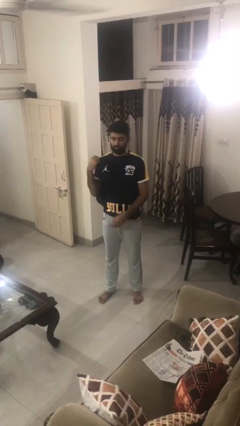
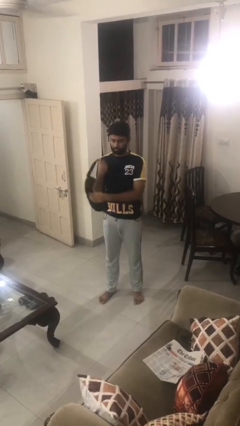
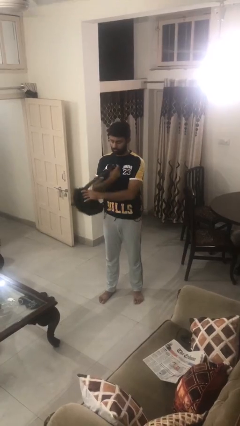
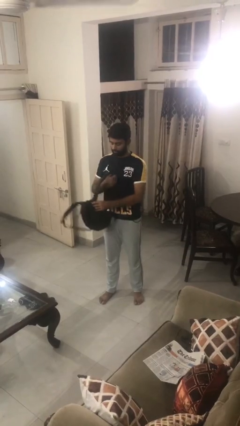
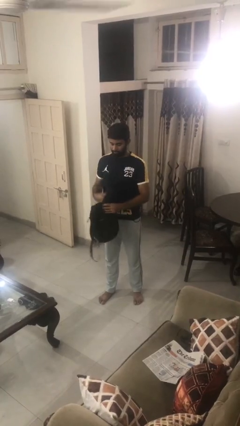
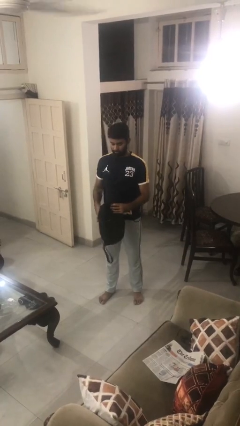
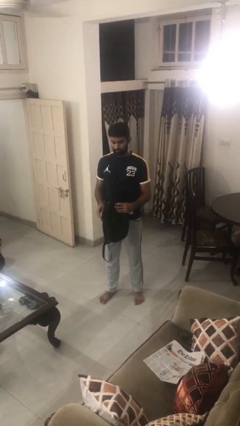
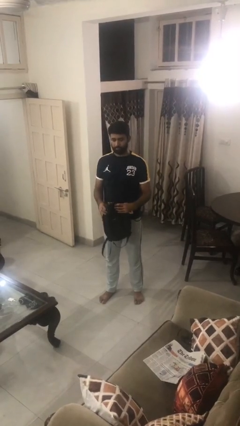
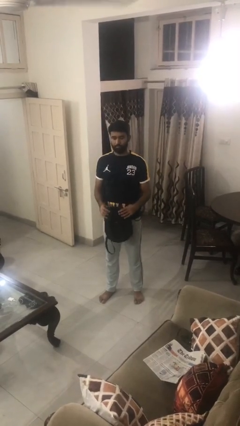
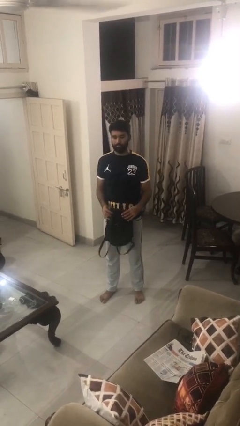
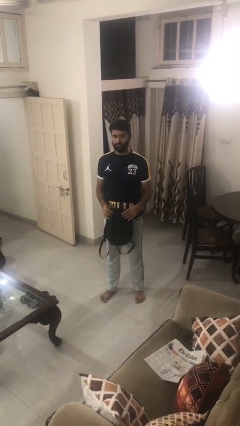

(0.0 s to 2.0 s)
person takes off backpack

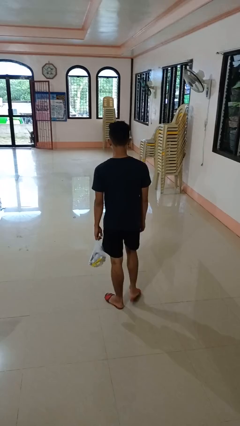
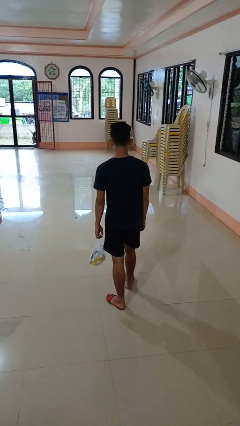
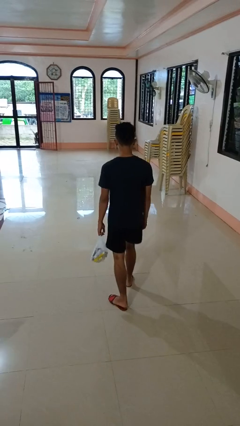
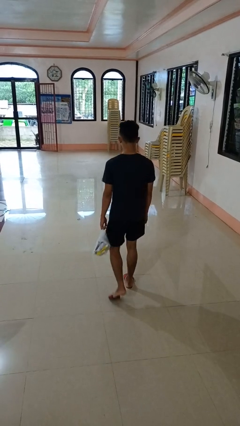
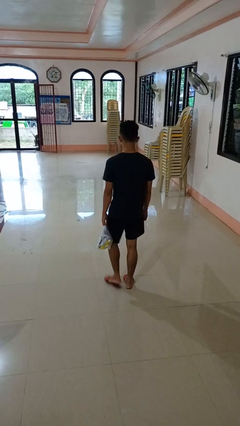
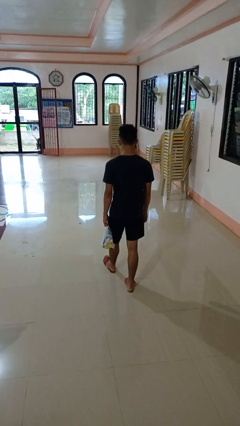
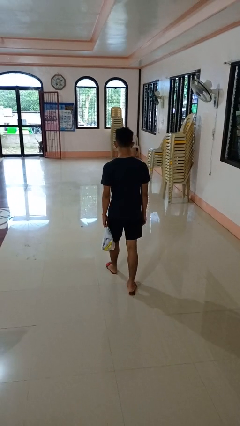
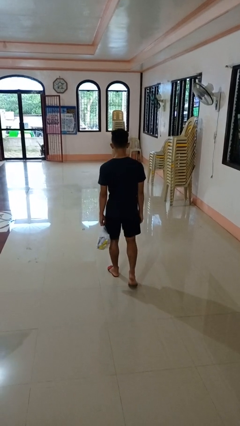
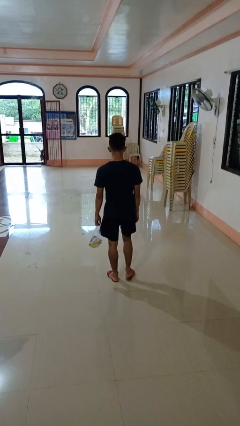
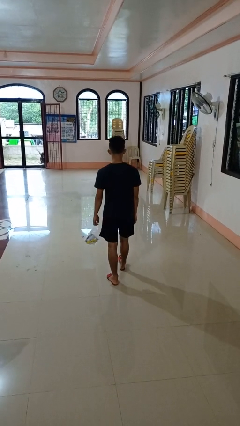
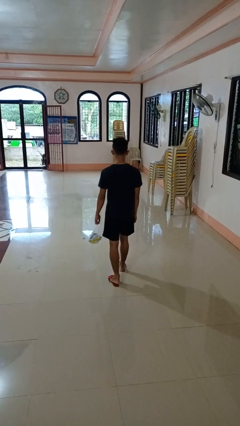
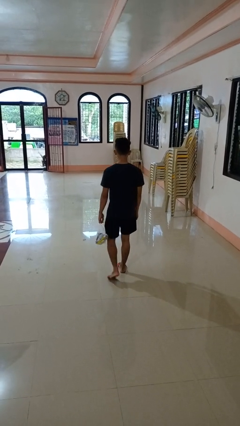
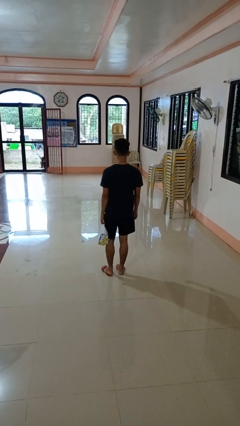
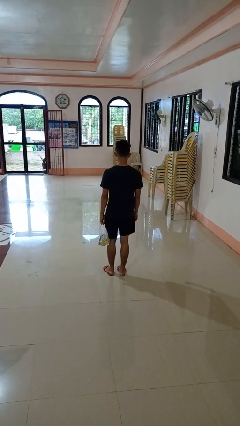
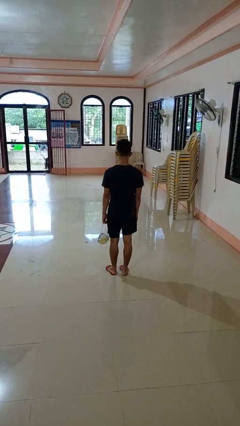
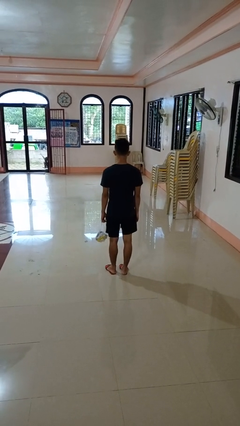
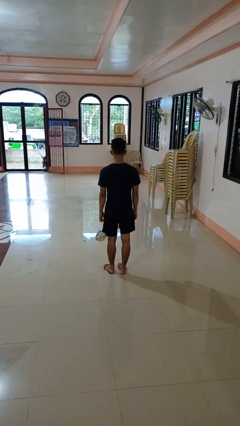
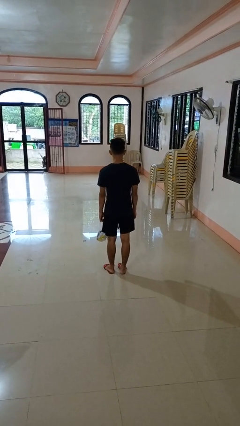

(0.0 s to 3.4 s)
person carries groceries

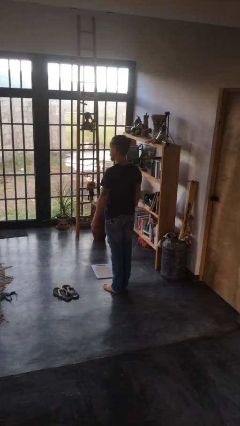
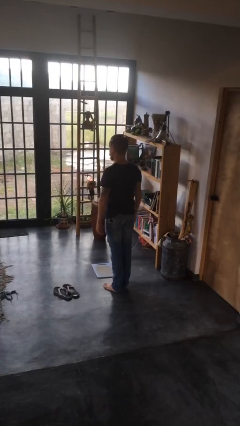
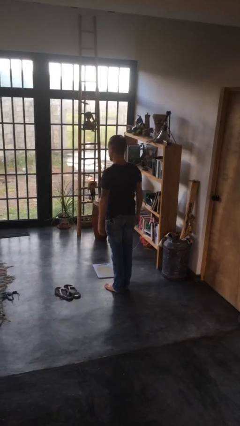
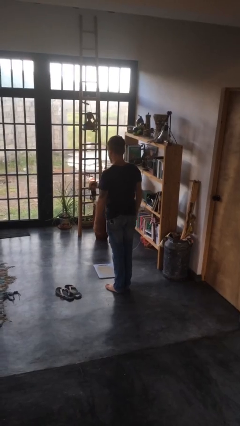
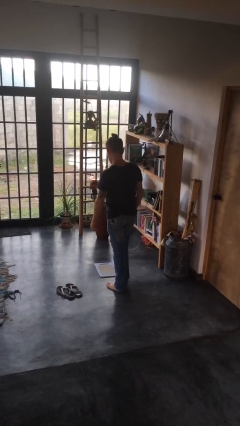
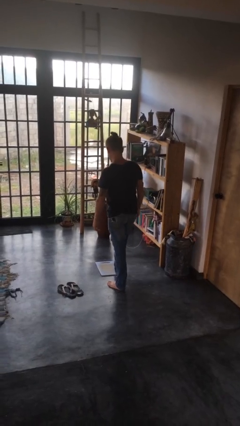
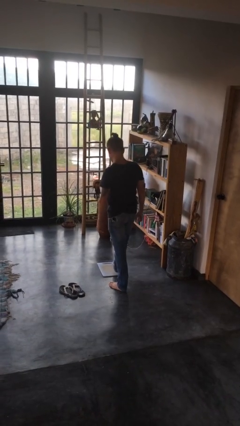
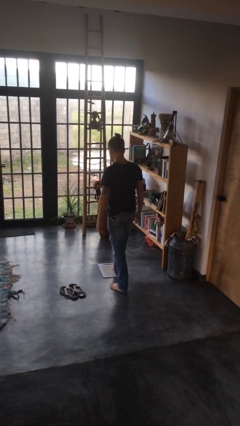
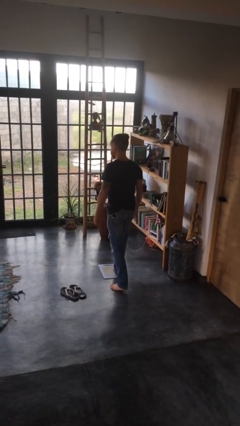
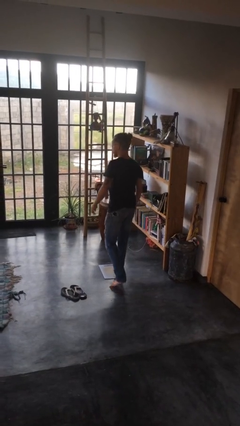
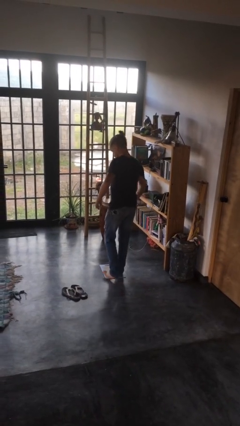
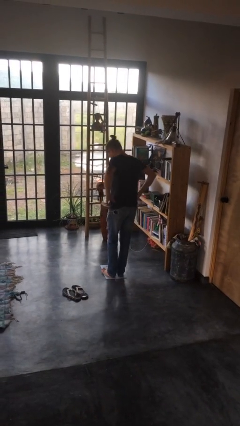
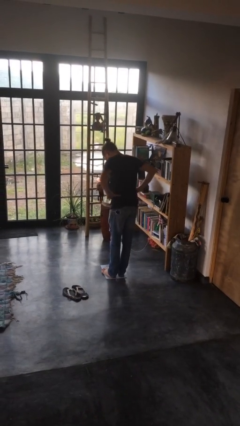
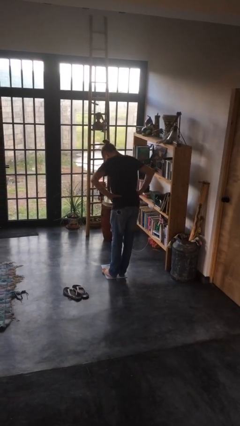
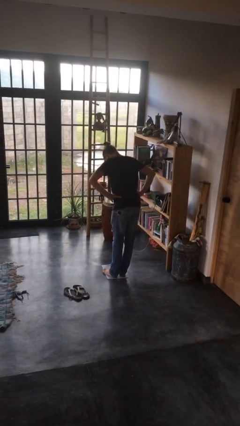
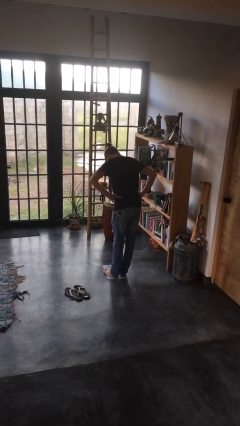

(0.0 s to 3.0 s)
person uses bodyweight scale

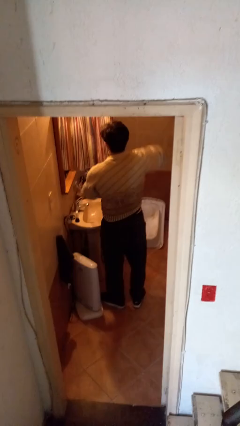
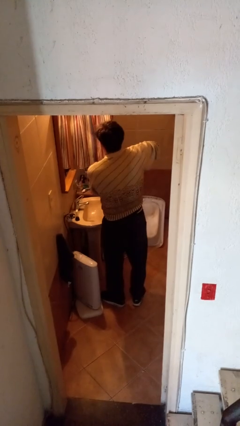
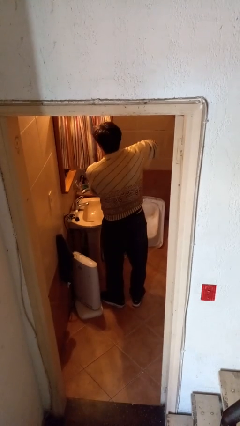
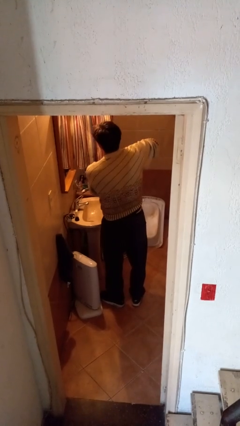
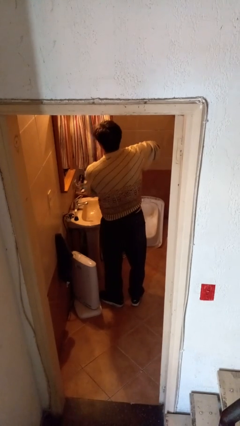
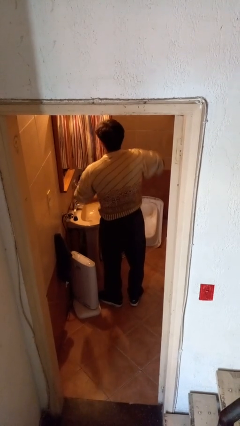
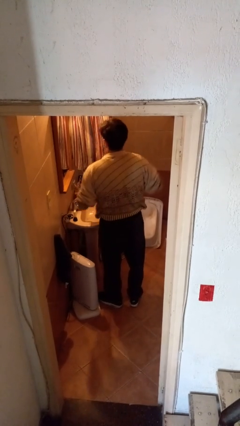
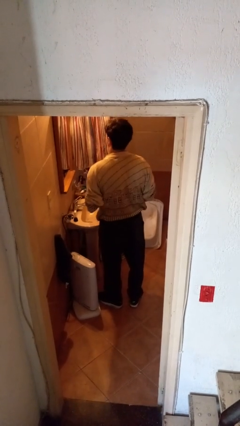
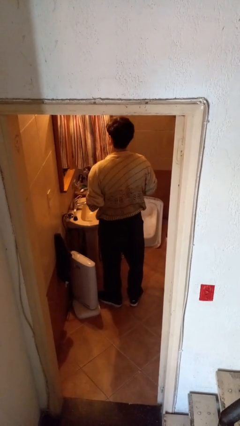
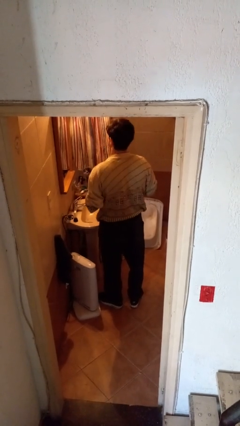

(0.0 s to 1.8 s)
person applies deodorant

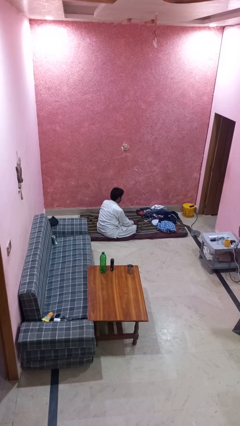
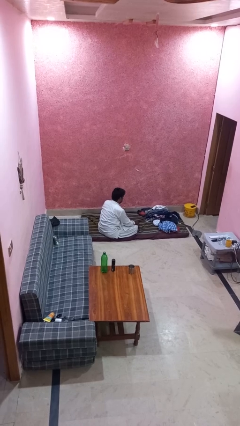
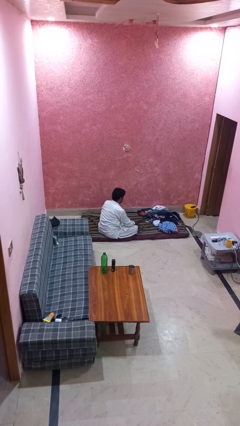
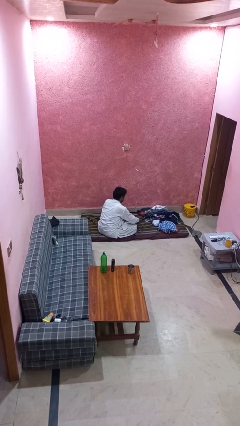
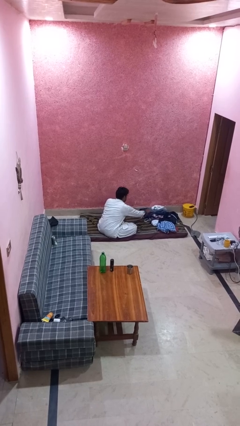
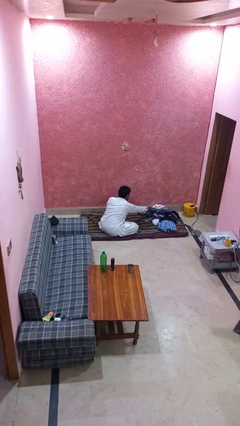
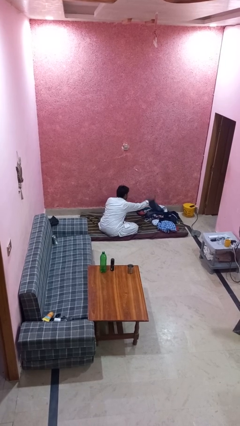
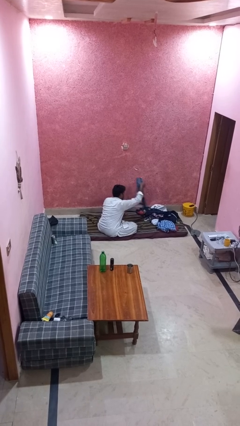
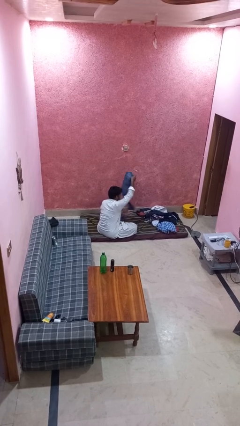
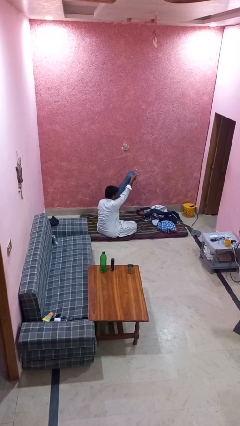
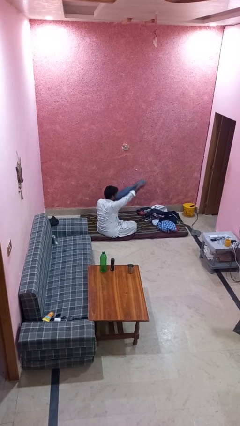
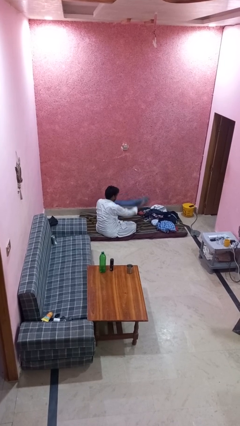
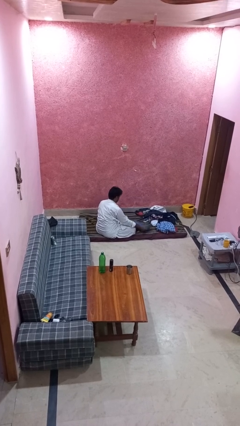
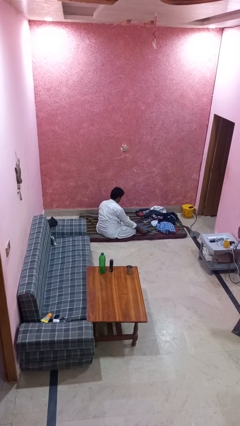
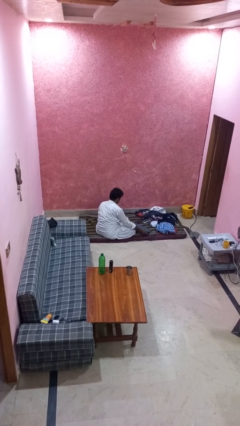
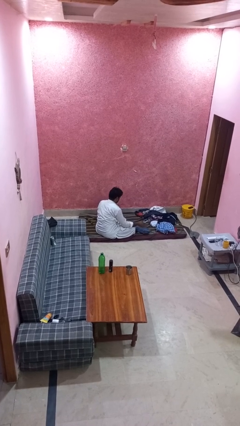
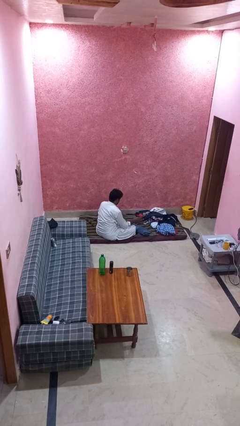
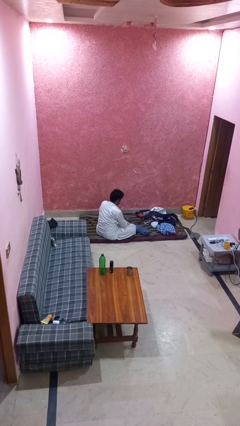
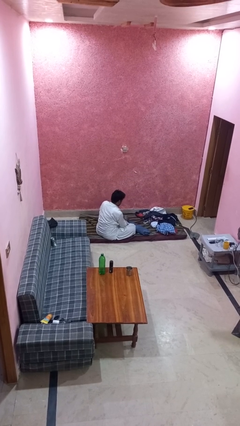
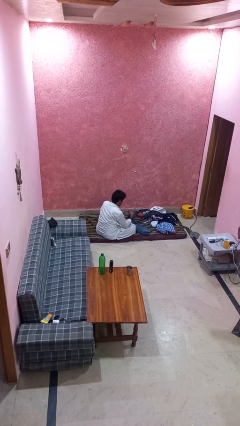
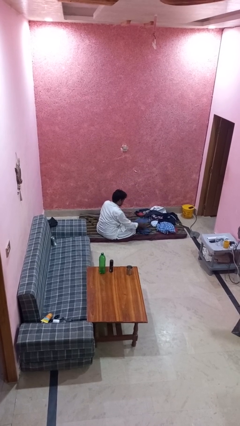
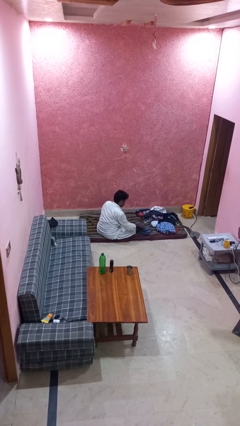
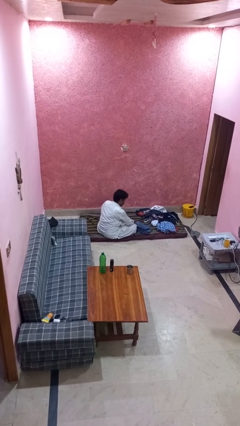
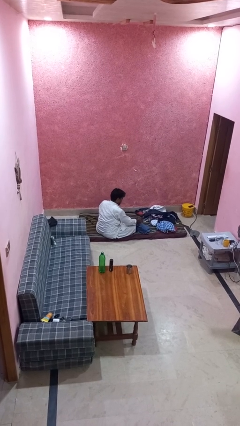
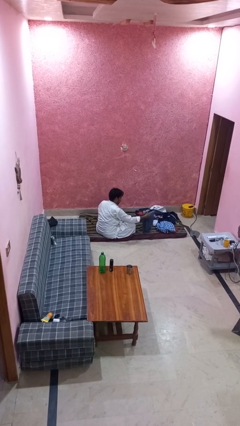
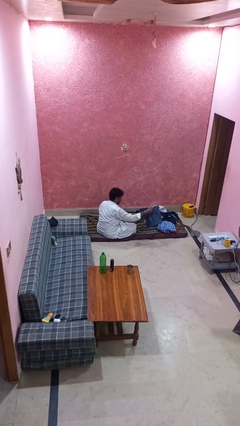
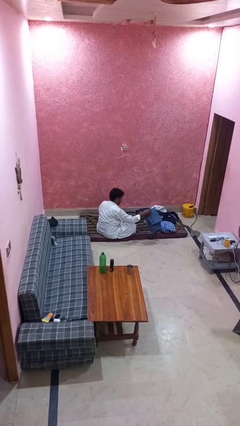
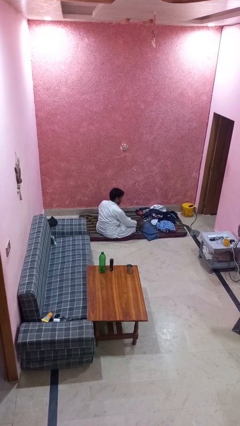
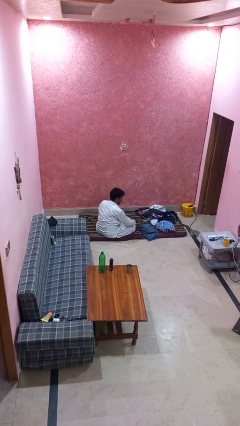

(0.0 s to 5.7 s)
person folds pants

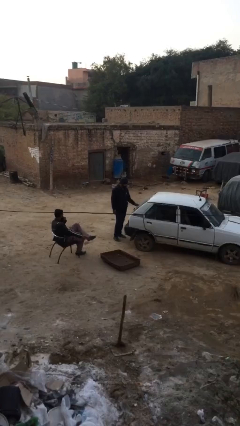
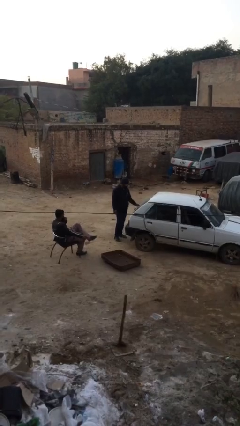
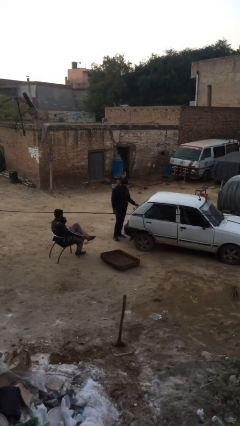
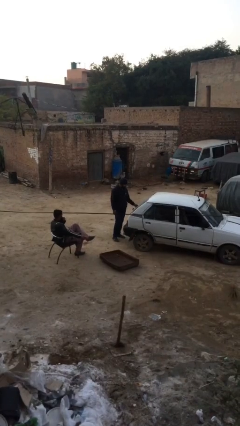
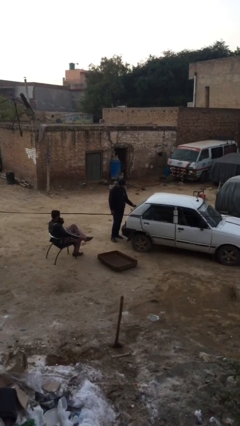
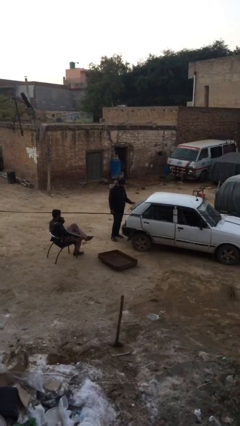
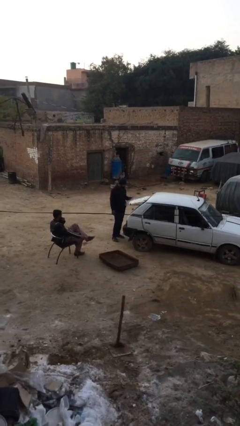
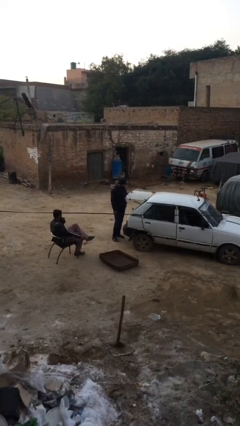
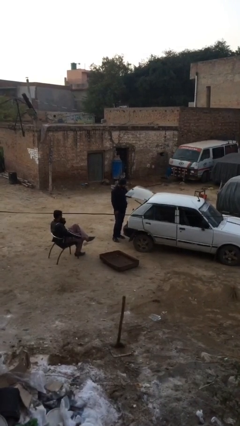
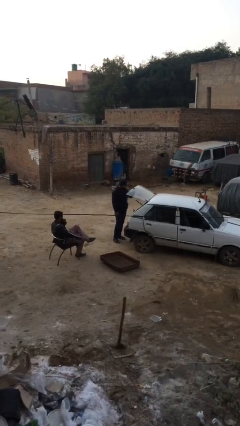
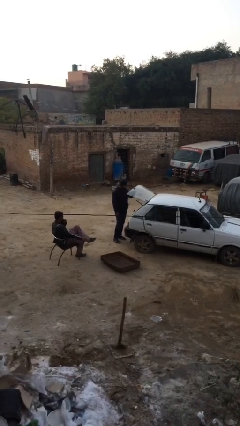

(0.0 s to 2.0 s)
person opens car trunk
